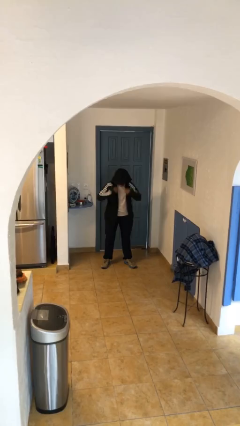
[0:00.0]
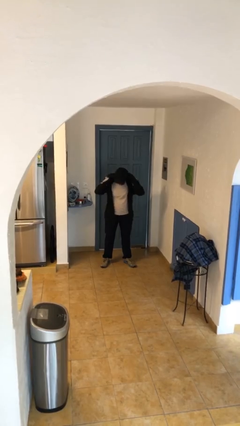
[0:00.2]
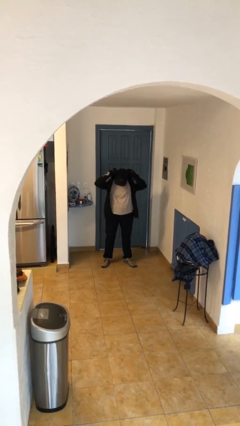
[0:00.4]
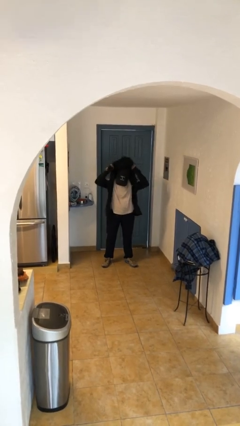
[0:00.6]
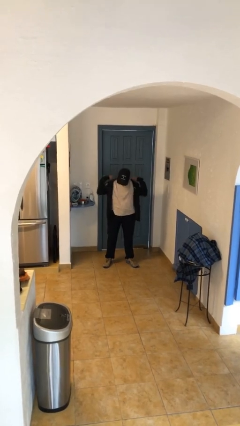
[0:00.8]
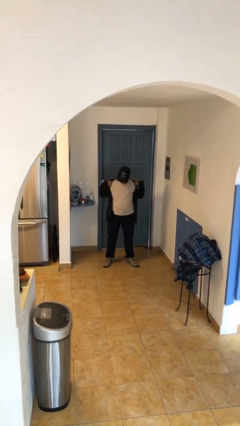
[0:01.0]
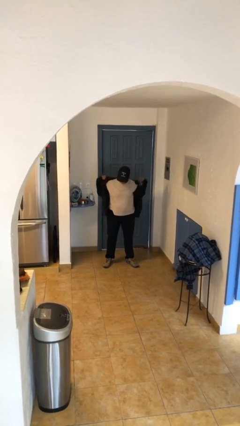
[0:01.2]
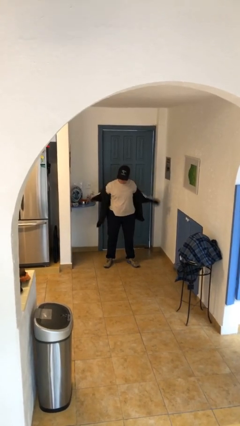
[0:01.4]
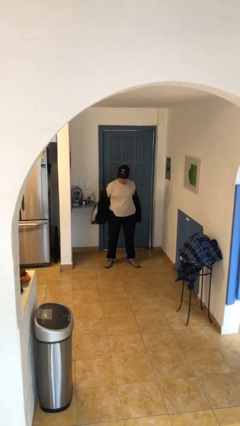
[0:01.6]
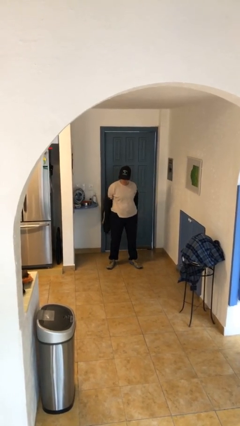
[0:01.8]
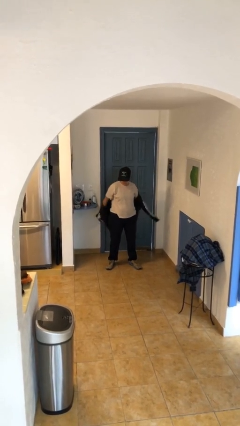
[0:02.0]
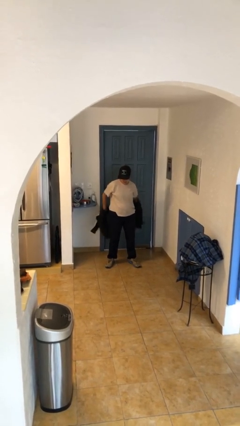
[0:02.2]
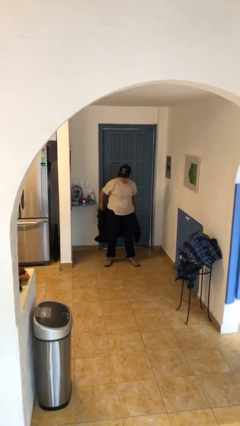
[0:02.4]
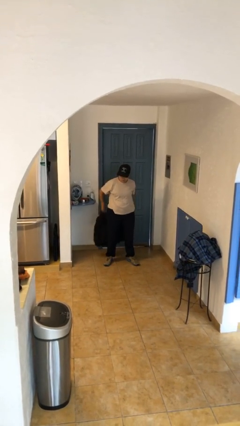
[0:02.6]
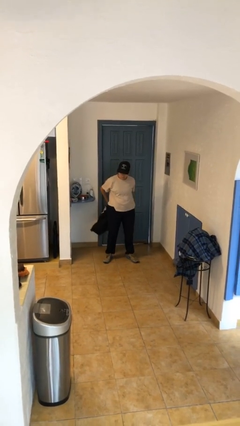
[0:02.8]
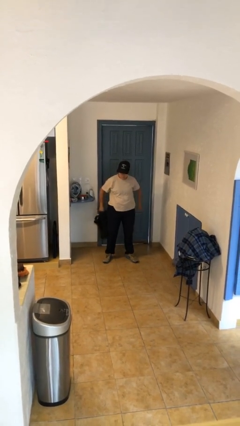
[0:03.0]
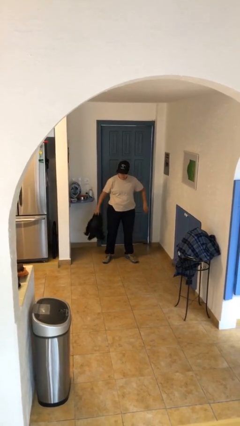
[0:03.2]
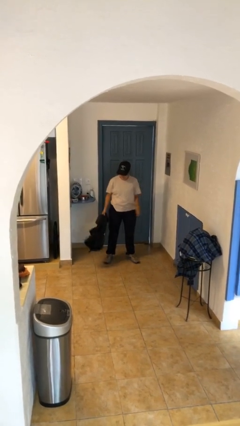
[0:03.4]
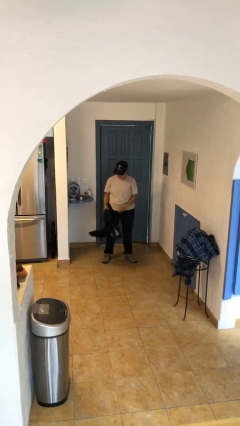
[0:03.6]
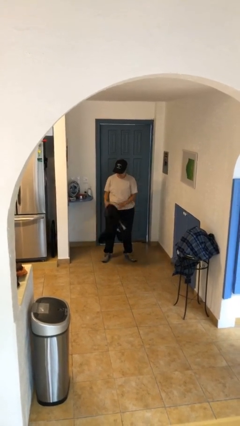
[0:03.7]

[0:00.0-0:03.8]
person takes off hoodie

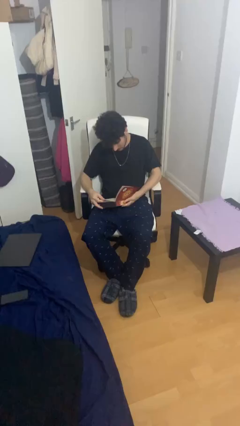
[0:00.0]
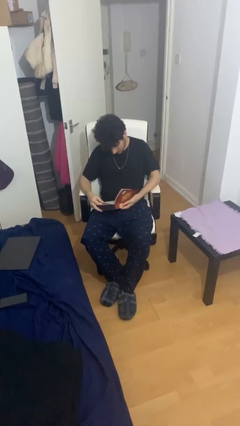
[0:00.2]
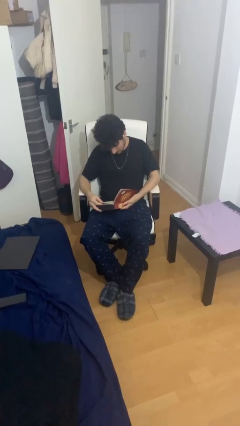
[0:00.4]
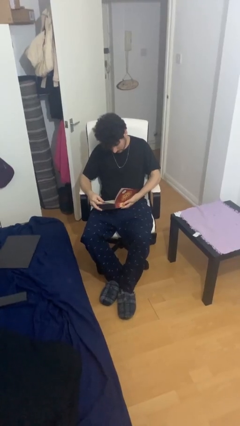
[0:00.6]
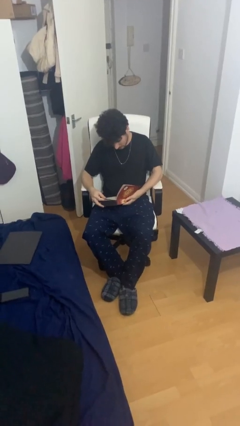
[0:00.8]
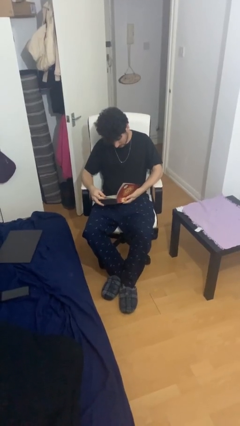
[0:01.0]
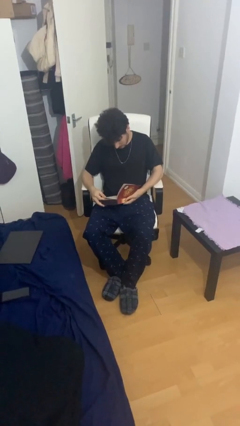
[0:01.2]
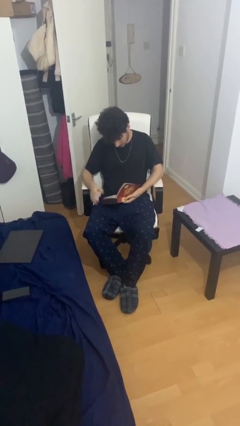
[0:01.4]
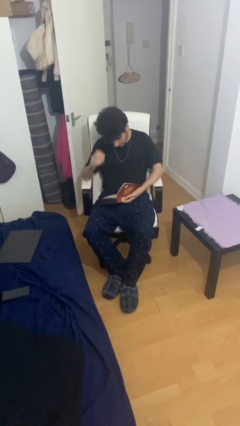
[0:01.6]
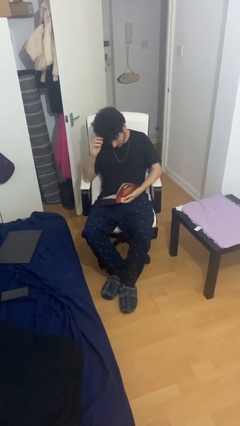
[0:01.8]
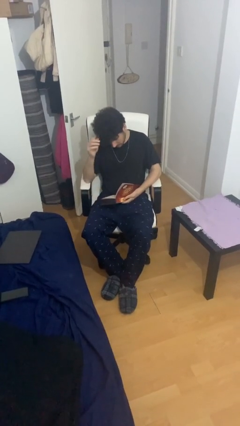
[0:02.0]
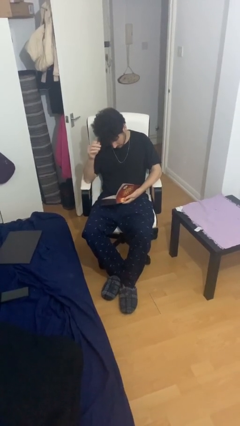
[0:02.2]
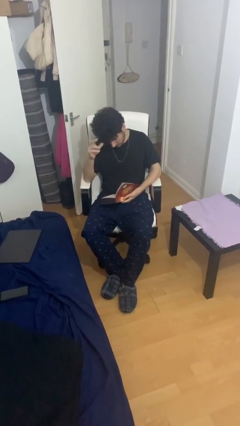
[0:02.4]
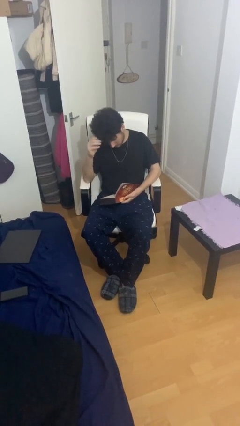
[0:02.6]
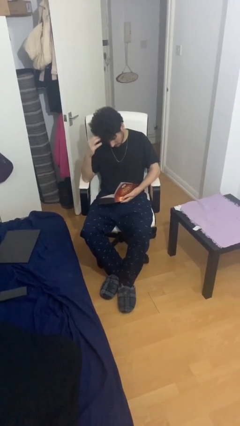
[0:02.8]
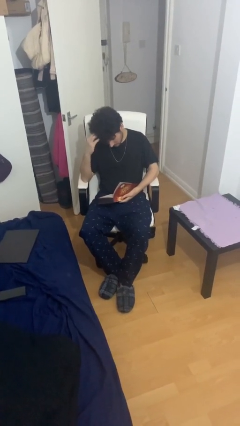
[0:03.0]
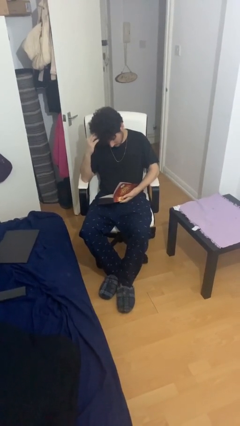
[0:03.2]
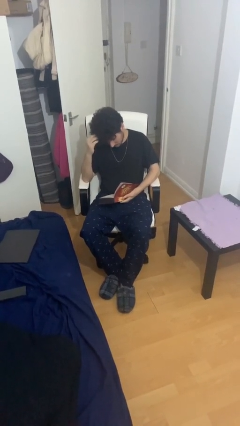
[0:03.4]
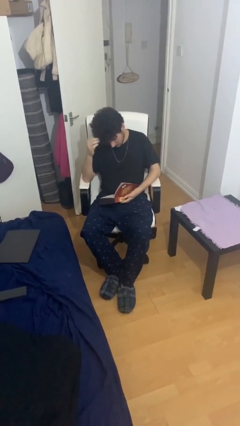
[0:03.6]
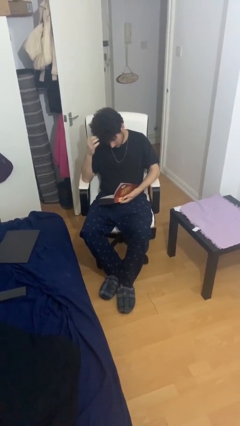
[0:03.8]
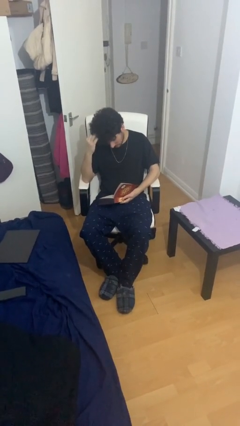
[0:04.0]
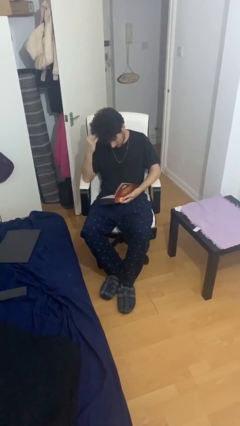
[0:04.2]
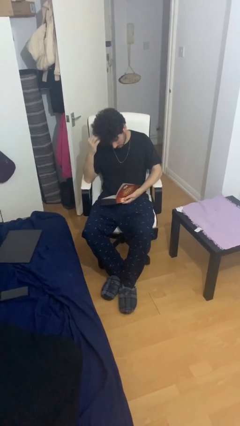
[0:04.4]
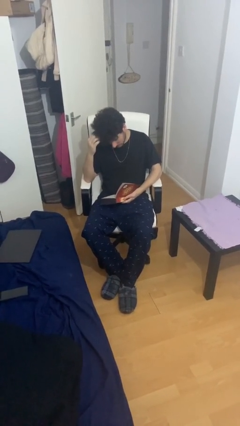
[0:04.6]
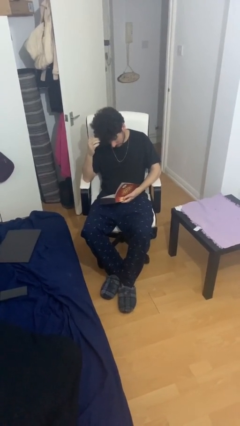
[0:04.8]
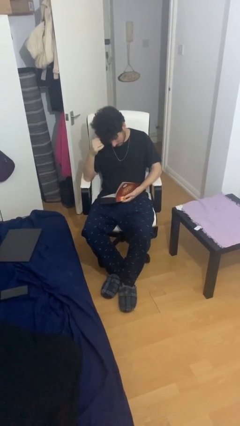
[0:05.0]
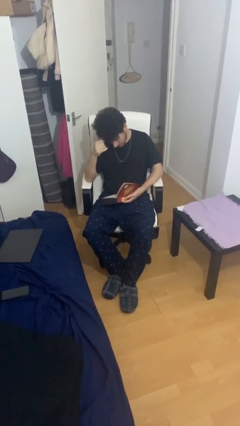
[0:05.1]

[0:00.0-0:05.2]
person reads document

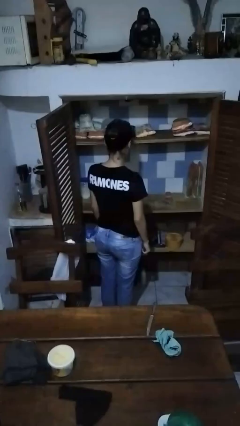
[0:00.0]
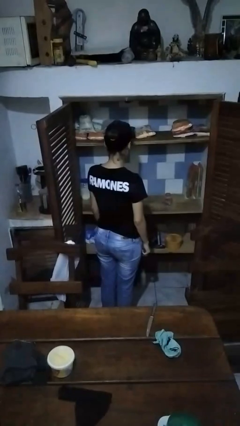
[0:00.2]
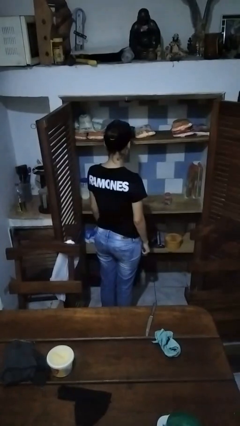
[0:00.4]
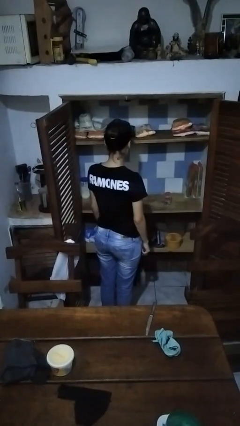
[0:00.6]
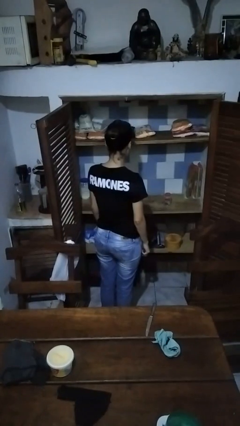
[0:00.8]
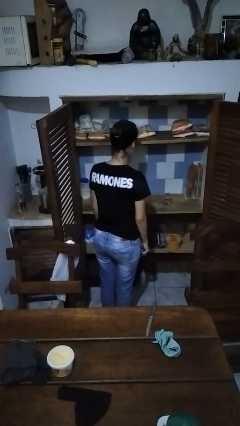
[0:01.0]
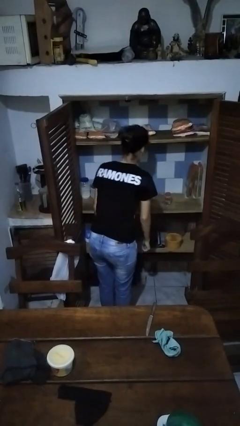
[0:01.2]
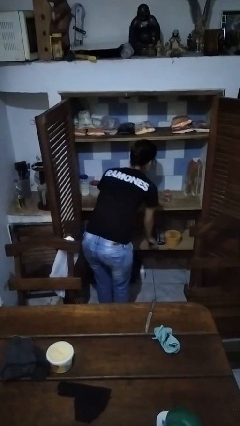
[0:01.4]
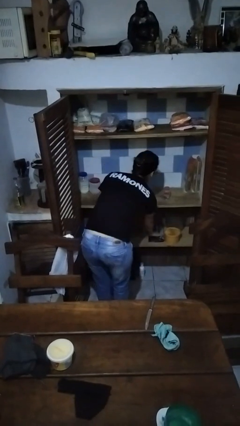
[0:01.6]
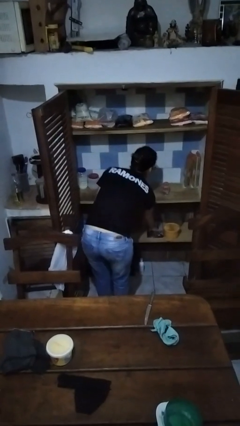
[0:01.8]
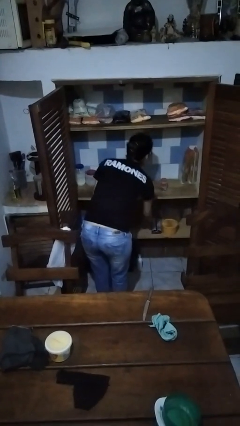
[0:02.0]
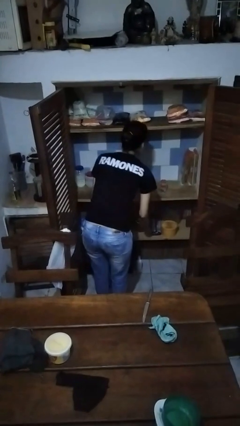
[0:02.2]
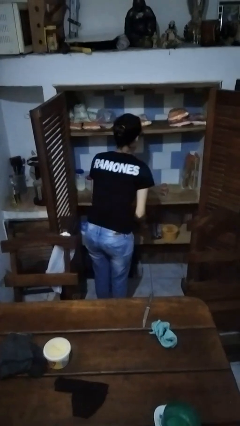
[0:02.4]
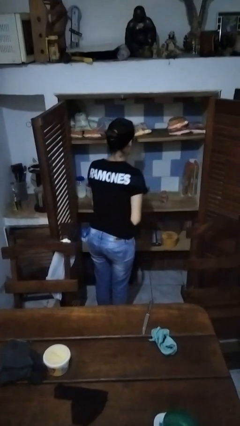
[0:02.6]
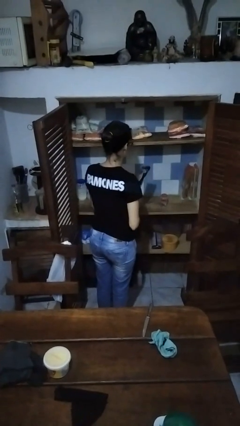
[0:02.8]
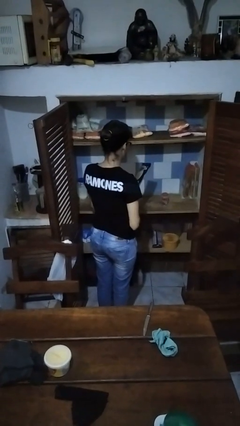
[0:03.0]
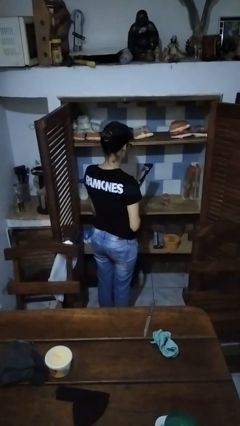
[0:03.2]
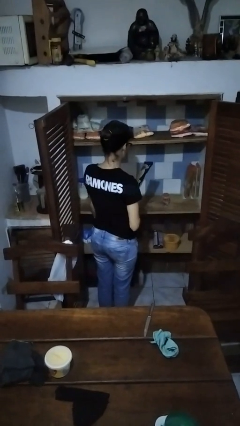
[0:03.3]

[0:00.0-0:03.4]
person takes object from cabinet

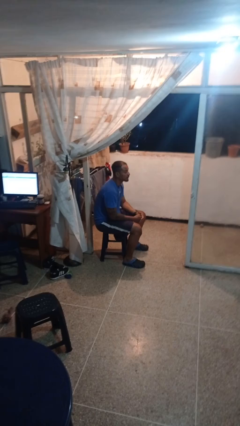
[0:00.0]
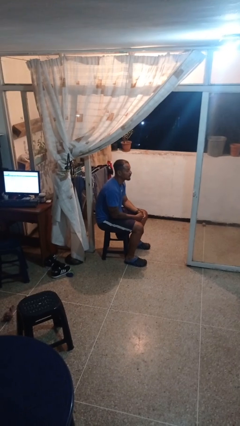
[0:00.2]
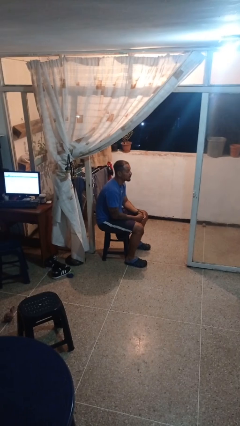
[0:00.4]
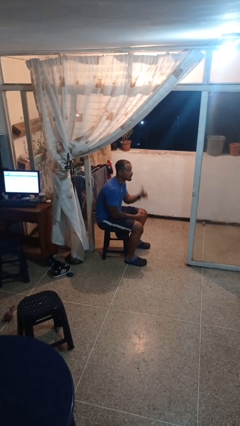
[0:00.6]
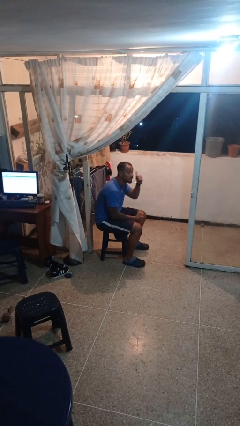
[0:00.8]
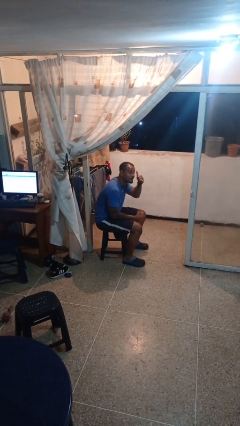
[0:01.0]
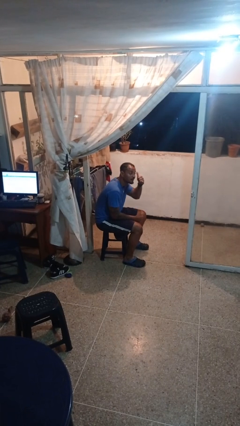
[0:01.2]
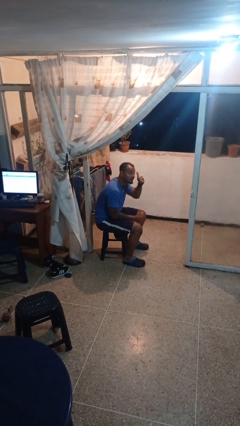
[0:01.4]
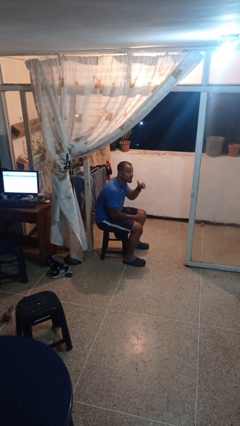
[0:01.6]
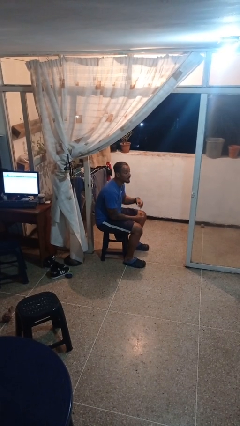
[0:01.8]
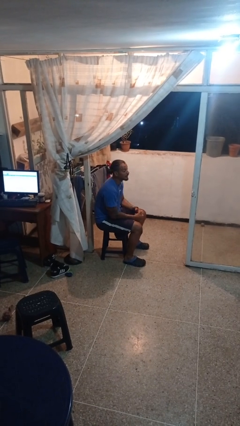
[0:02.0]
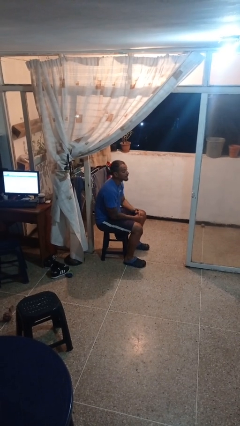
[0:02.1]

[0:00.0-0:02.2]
person gestures call me

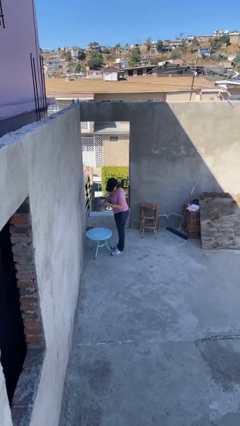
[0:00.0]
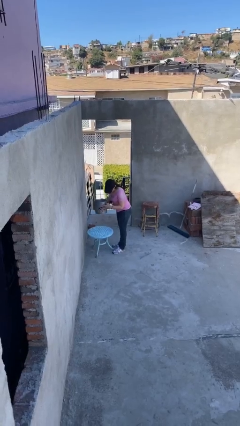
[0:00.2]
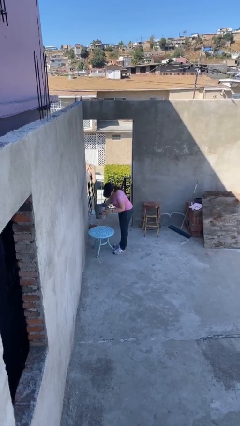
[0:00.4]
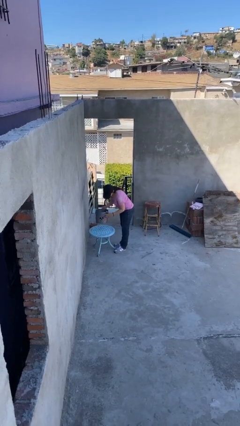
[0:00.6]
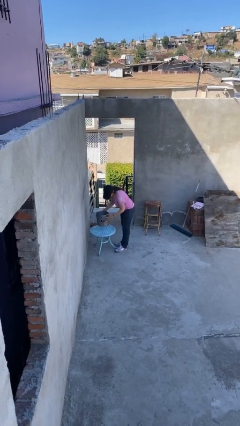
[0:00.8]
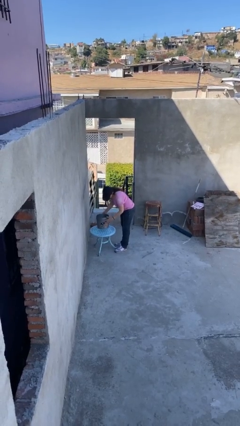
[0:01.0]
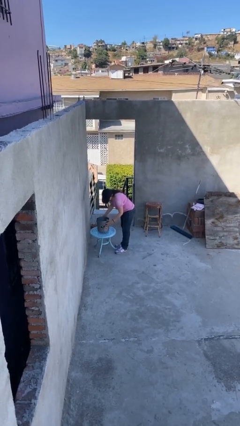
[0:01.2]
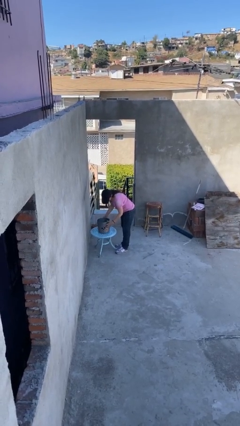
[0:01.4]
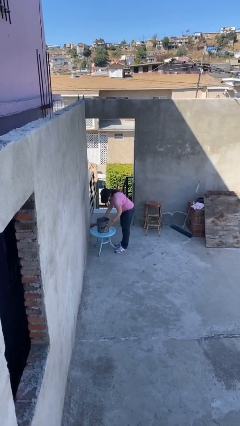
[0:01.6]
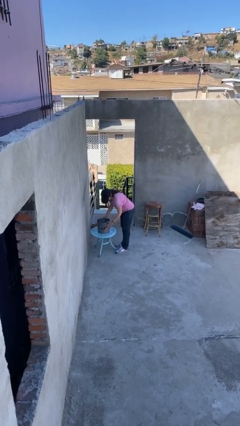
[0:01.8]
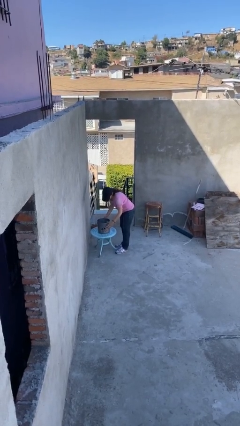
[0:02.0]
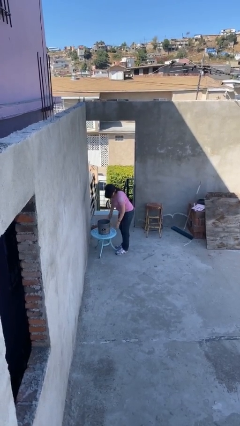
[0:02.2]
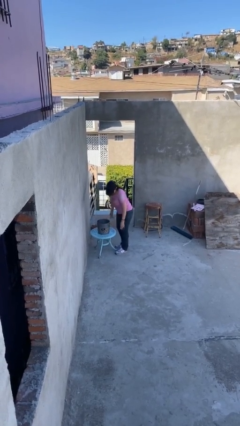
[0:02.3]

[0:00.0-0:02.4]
person puts down object on table

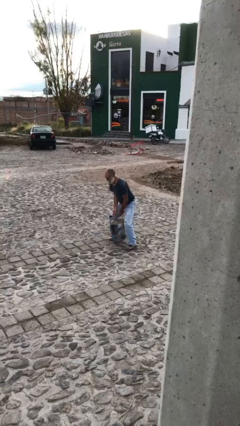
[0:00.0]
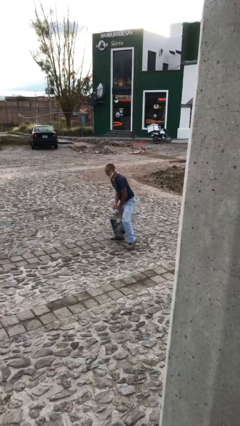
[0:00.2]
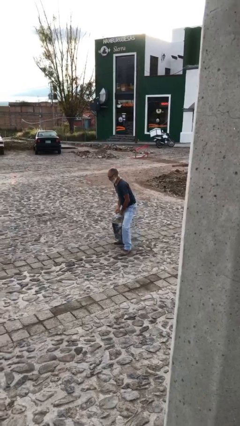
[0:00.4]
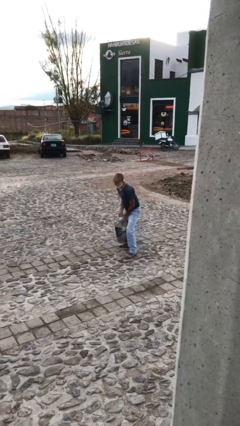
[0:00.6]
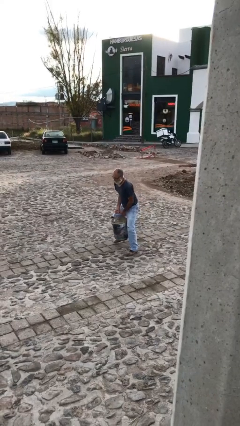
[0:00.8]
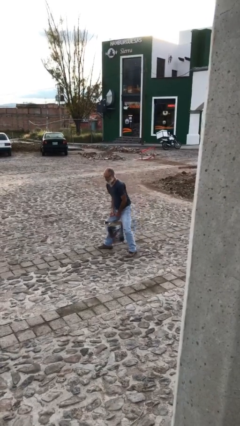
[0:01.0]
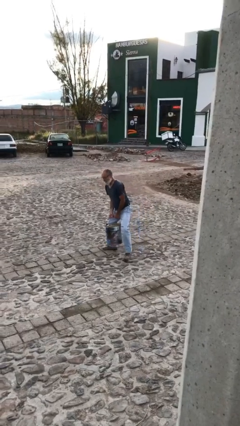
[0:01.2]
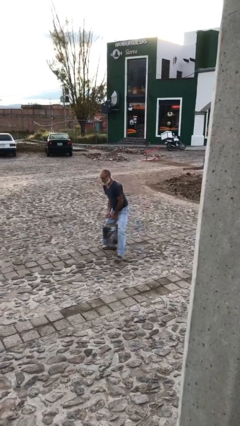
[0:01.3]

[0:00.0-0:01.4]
person carries heavy object
